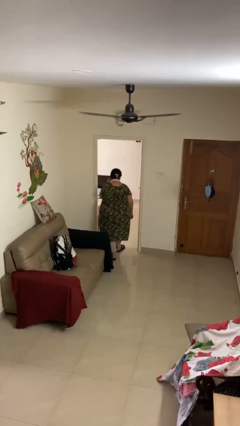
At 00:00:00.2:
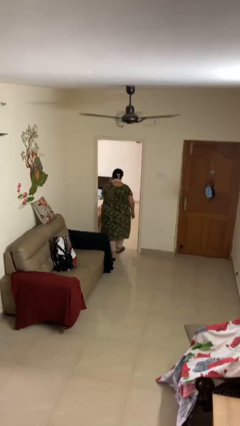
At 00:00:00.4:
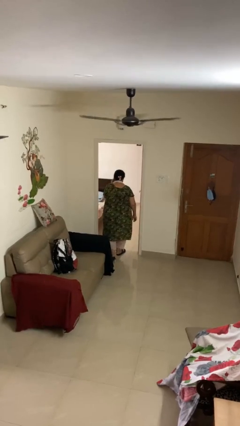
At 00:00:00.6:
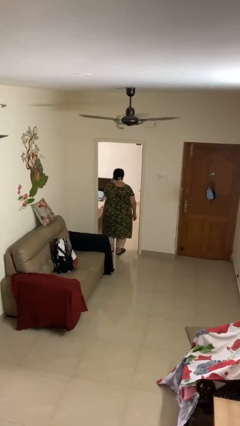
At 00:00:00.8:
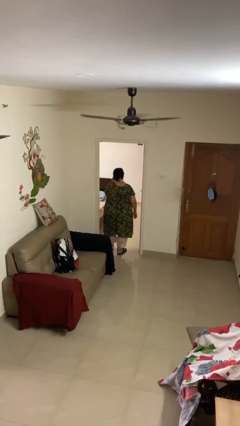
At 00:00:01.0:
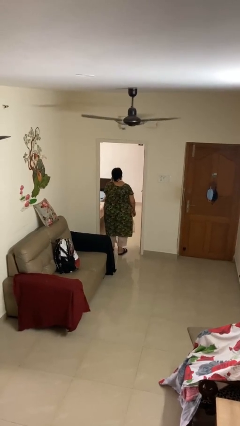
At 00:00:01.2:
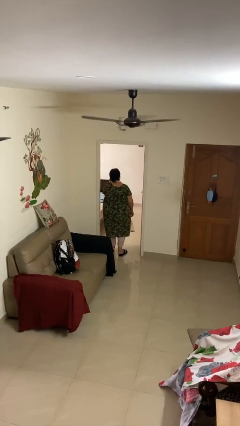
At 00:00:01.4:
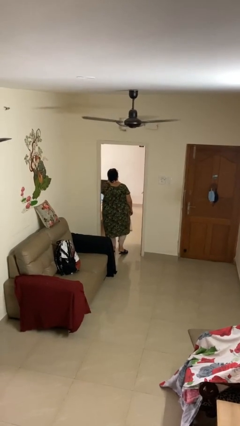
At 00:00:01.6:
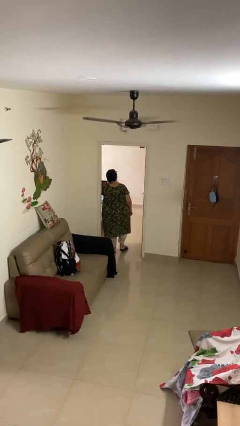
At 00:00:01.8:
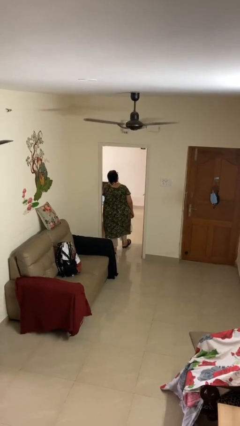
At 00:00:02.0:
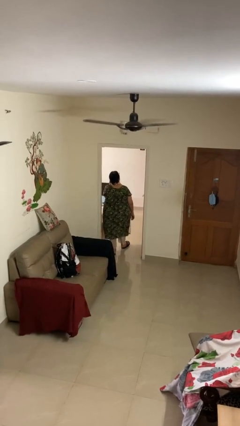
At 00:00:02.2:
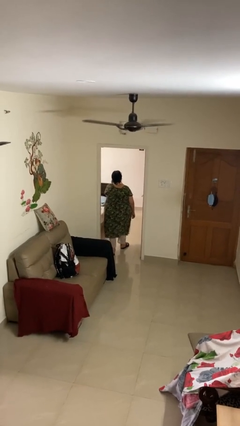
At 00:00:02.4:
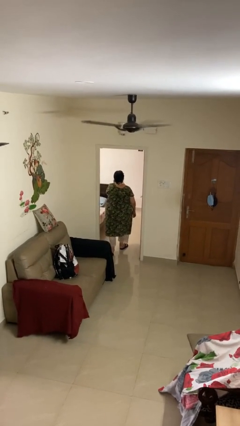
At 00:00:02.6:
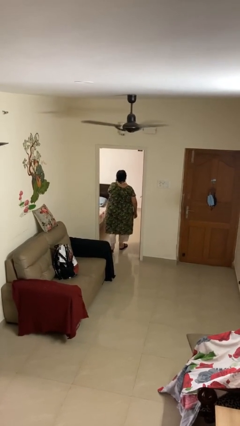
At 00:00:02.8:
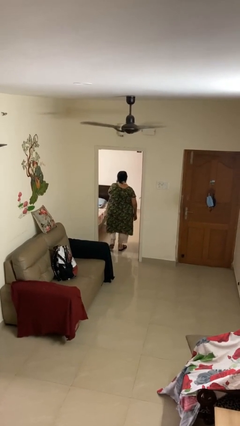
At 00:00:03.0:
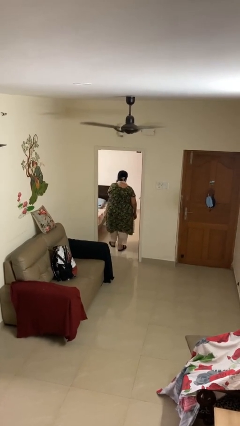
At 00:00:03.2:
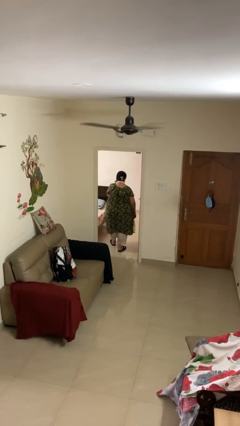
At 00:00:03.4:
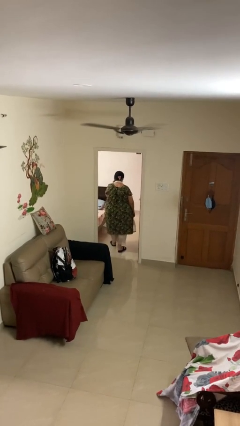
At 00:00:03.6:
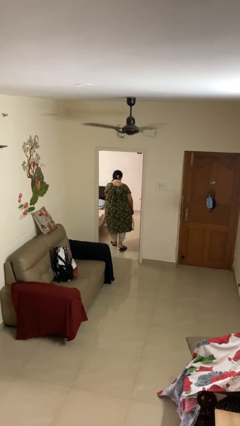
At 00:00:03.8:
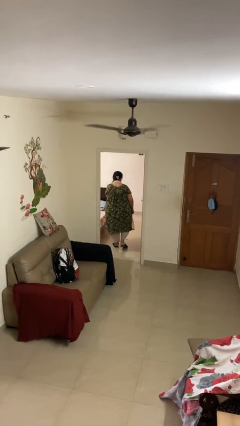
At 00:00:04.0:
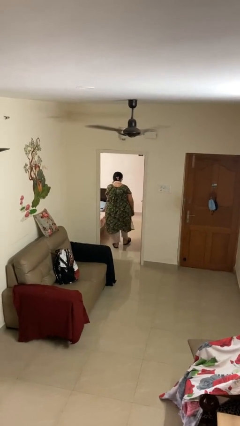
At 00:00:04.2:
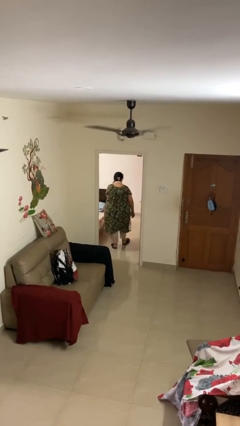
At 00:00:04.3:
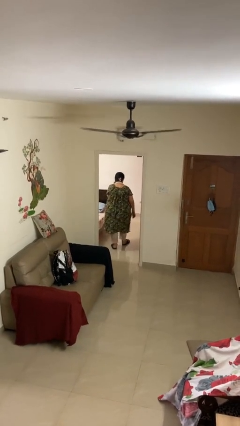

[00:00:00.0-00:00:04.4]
person exits scene through structure

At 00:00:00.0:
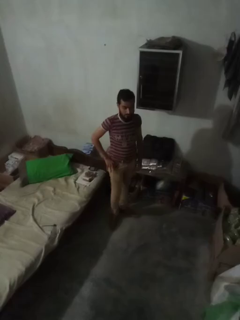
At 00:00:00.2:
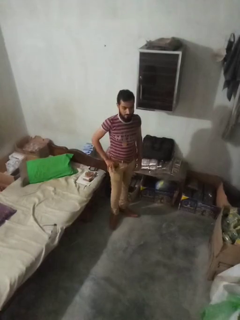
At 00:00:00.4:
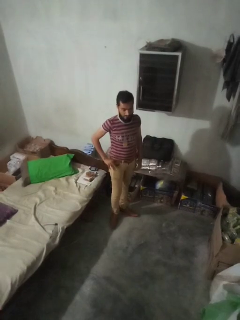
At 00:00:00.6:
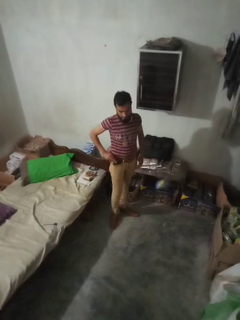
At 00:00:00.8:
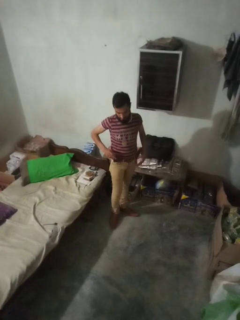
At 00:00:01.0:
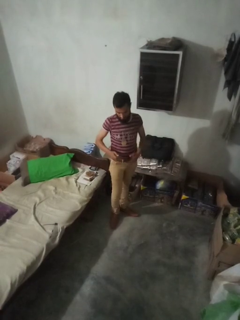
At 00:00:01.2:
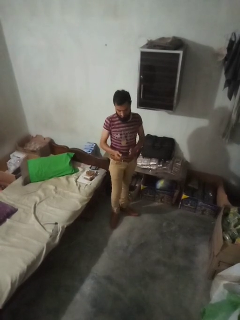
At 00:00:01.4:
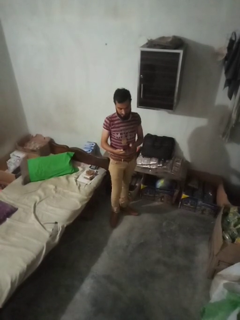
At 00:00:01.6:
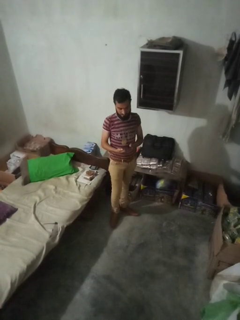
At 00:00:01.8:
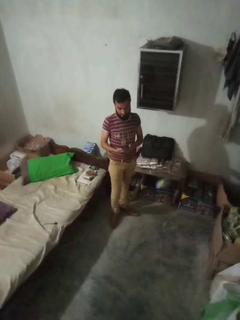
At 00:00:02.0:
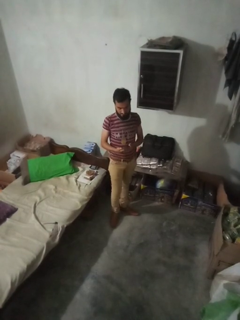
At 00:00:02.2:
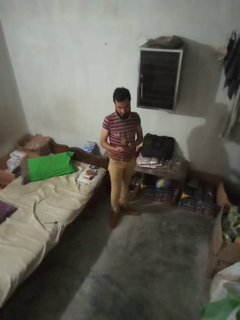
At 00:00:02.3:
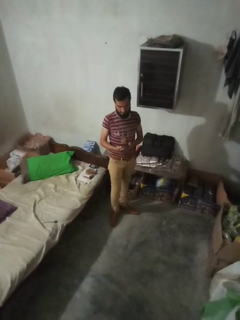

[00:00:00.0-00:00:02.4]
person takes phone from pocket

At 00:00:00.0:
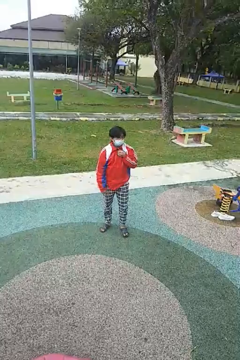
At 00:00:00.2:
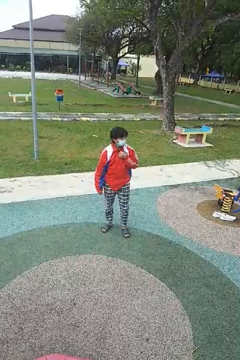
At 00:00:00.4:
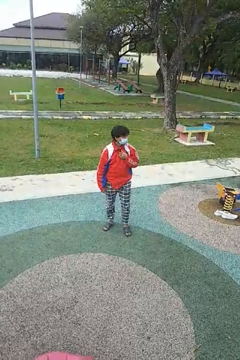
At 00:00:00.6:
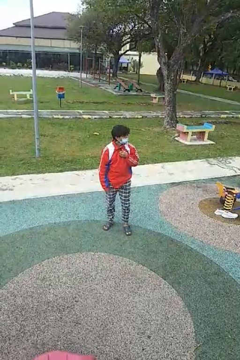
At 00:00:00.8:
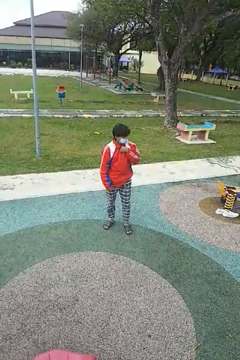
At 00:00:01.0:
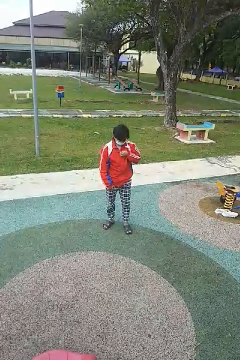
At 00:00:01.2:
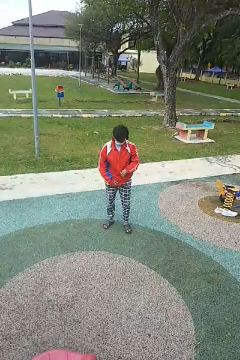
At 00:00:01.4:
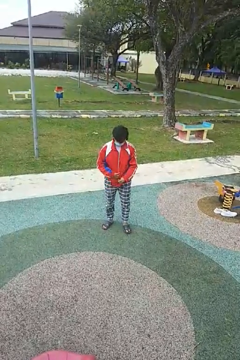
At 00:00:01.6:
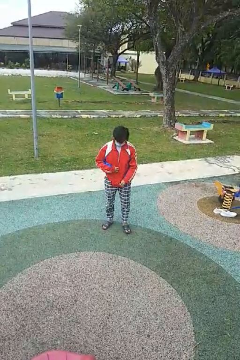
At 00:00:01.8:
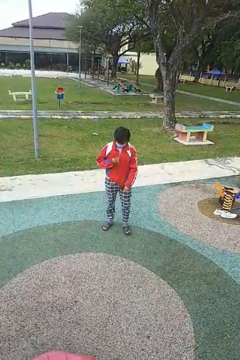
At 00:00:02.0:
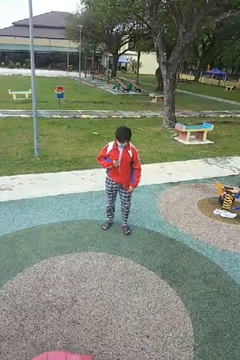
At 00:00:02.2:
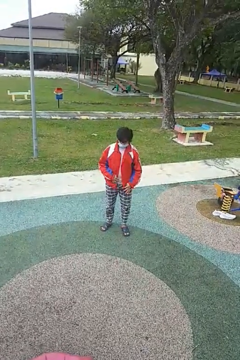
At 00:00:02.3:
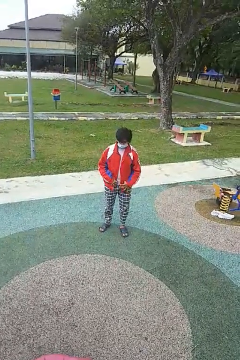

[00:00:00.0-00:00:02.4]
person unzips jacket

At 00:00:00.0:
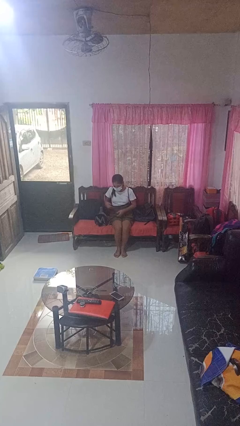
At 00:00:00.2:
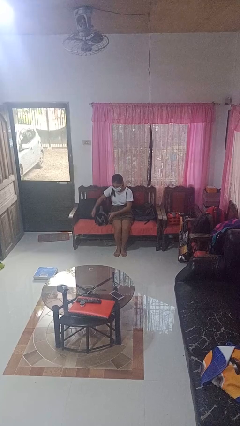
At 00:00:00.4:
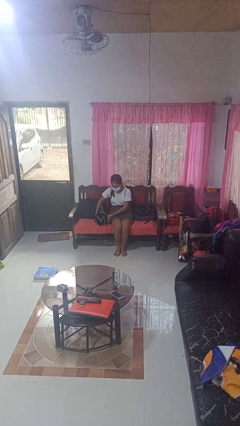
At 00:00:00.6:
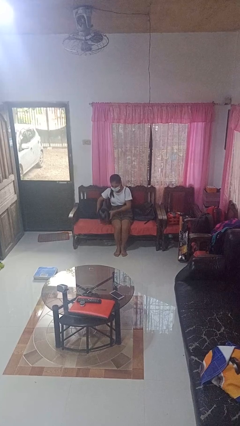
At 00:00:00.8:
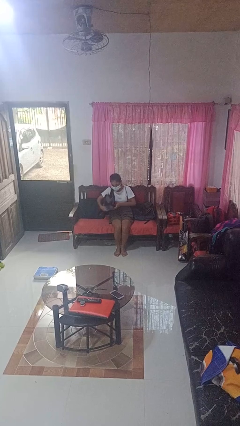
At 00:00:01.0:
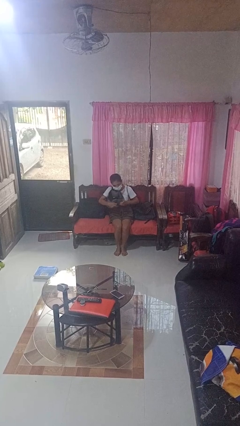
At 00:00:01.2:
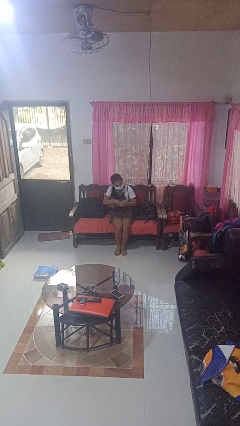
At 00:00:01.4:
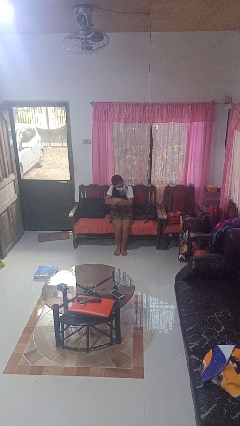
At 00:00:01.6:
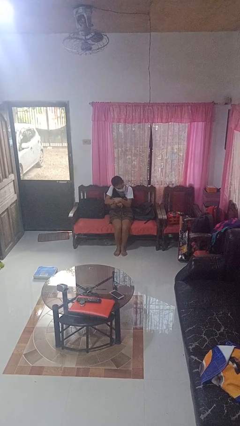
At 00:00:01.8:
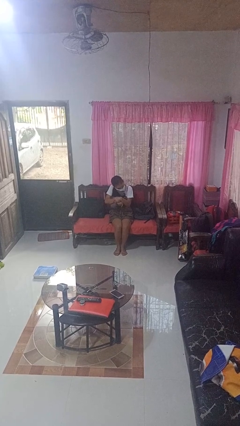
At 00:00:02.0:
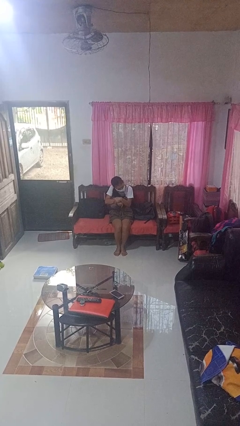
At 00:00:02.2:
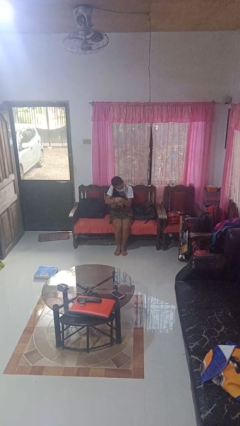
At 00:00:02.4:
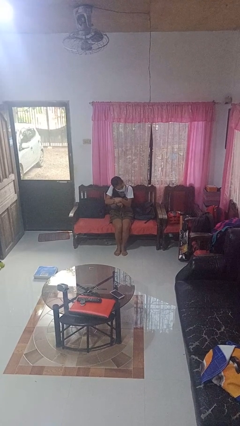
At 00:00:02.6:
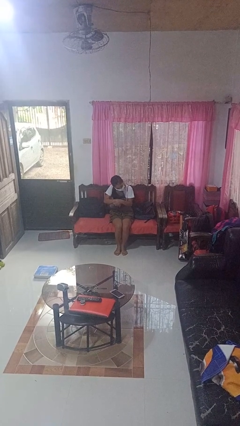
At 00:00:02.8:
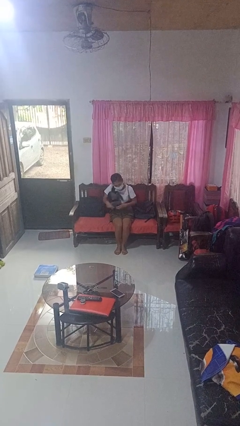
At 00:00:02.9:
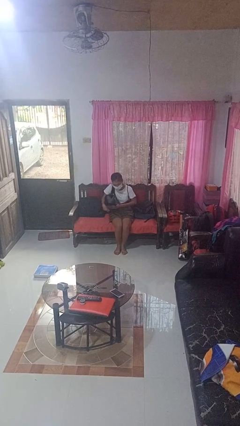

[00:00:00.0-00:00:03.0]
person hugs stuffed animal

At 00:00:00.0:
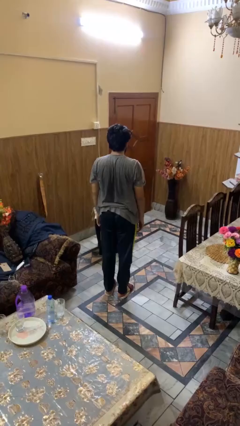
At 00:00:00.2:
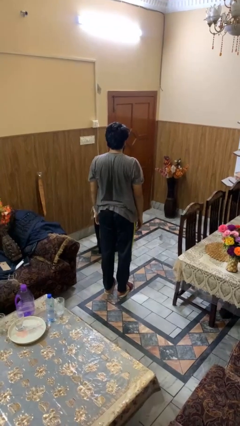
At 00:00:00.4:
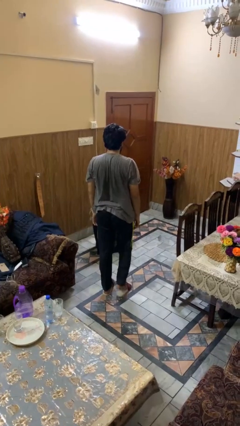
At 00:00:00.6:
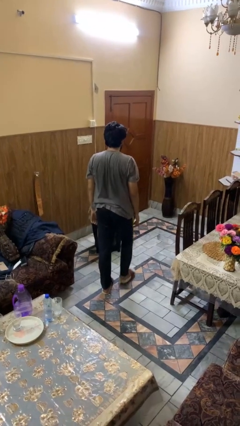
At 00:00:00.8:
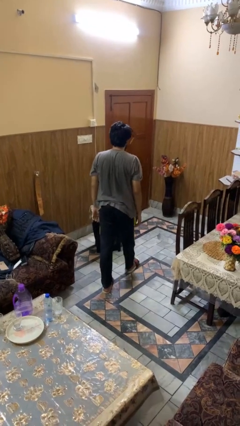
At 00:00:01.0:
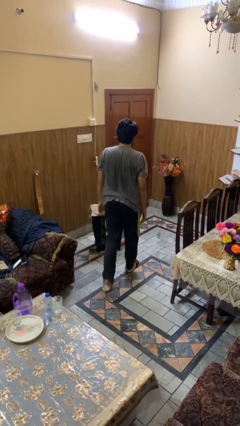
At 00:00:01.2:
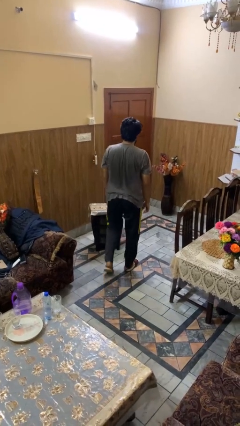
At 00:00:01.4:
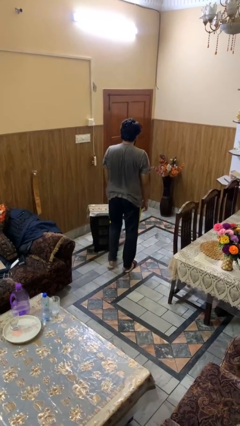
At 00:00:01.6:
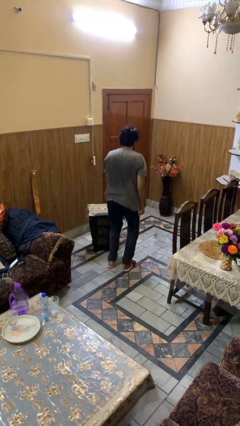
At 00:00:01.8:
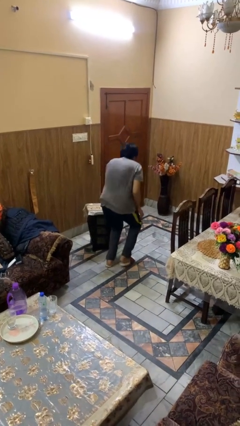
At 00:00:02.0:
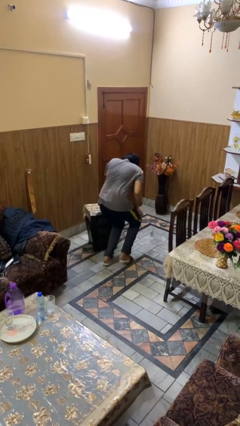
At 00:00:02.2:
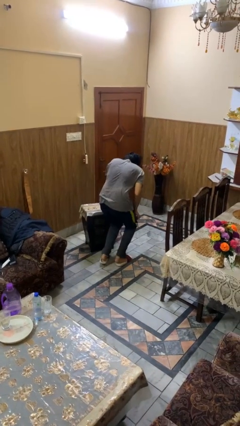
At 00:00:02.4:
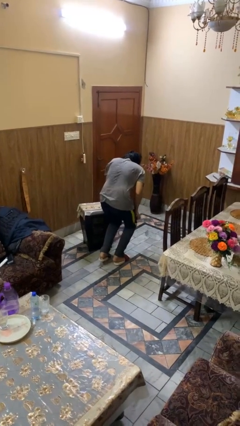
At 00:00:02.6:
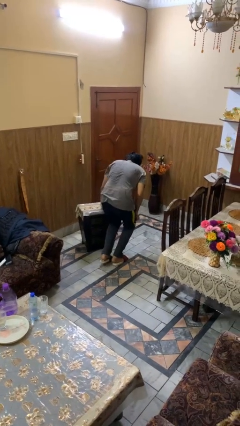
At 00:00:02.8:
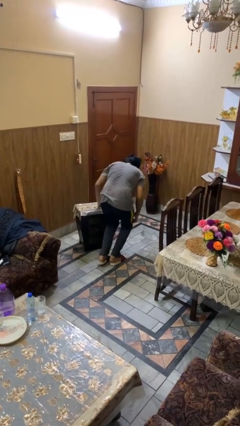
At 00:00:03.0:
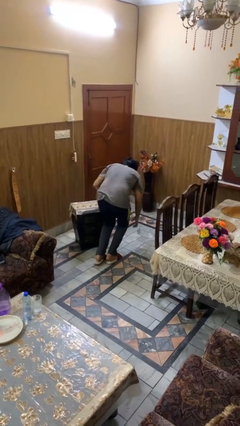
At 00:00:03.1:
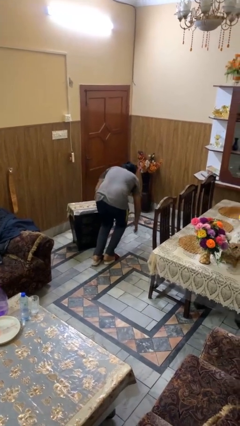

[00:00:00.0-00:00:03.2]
person trips on object on floor

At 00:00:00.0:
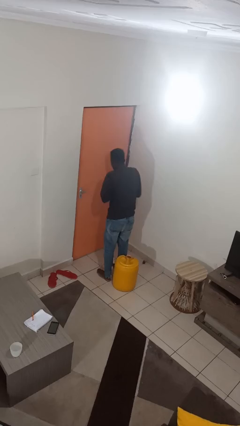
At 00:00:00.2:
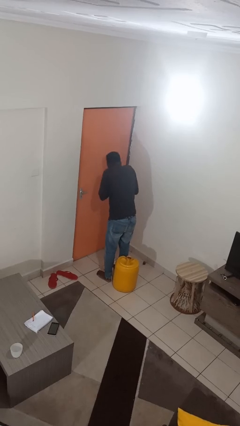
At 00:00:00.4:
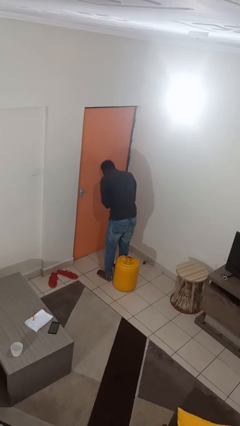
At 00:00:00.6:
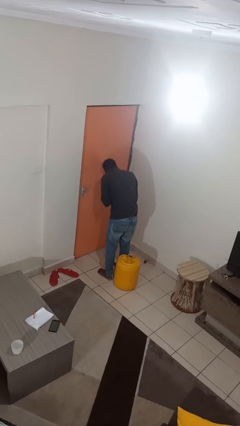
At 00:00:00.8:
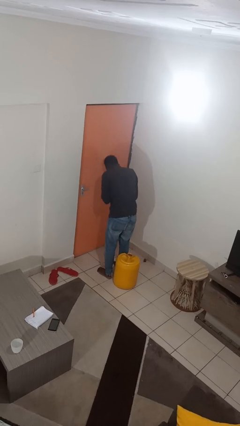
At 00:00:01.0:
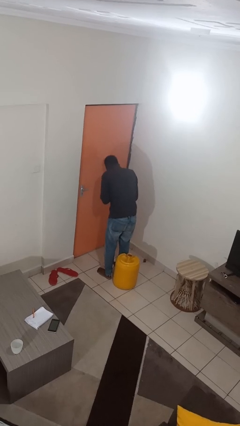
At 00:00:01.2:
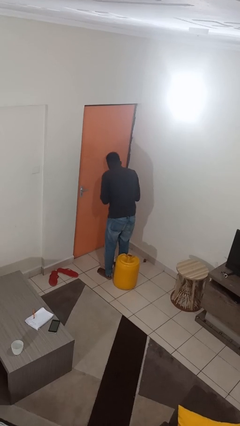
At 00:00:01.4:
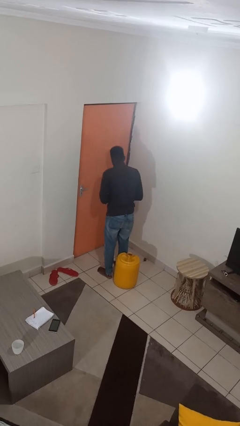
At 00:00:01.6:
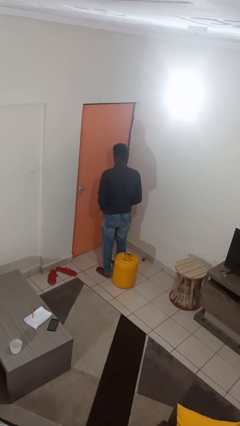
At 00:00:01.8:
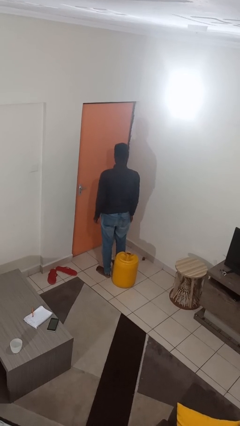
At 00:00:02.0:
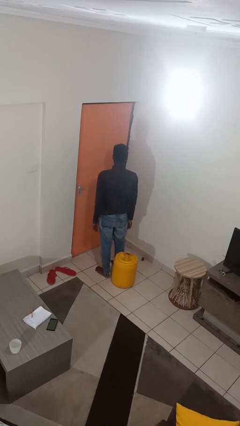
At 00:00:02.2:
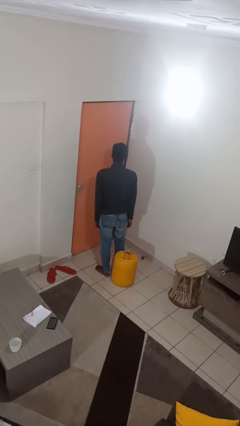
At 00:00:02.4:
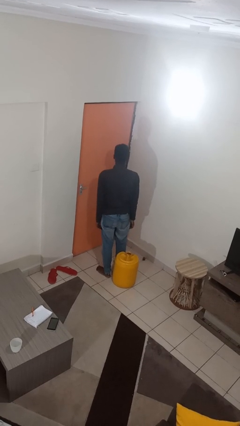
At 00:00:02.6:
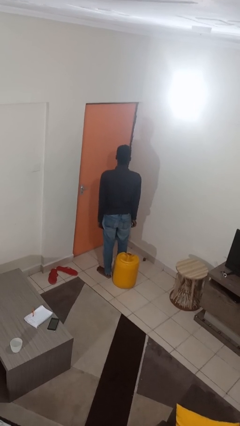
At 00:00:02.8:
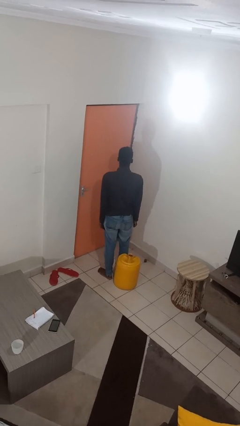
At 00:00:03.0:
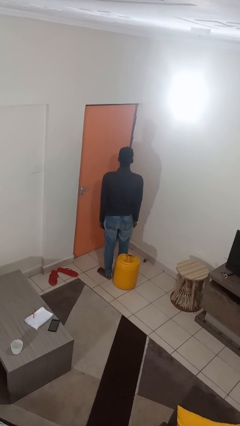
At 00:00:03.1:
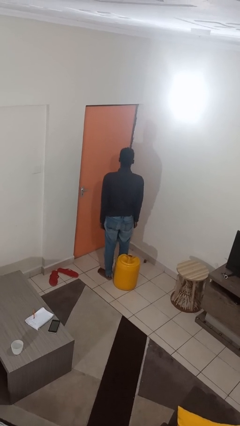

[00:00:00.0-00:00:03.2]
person sneezes into hand
